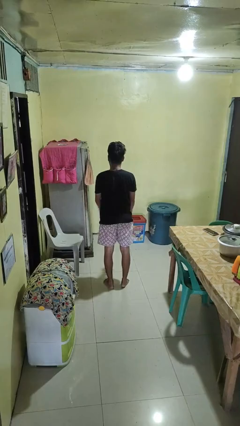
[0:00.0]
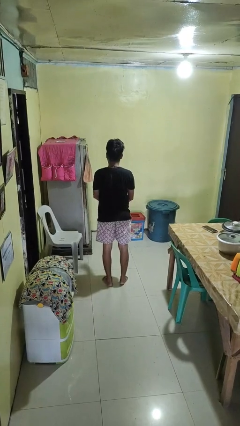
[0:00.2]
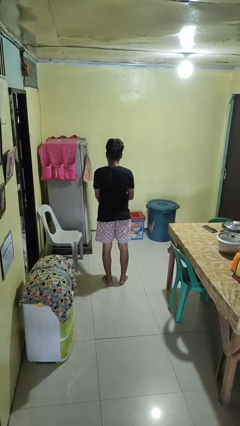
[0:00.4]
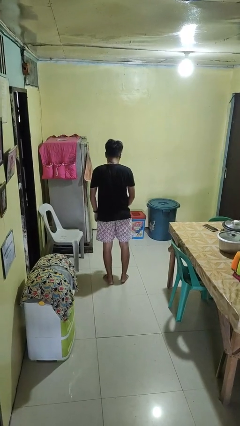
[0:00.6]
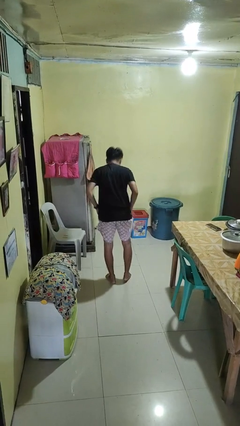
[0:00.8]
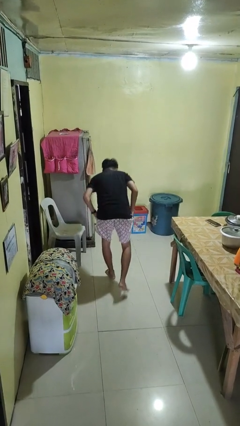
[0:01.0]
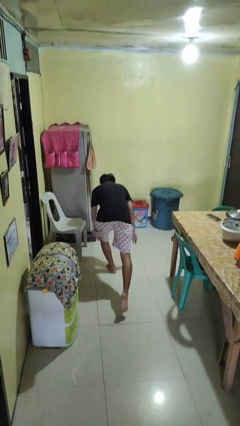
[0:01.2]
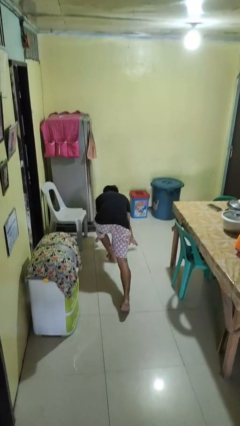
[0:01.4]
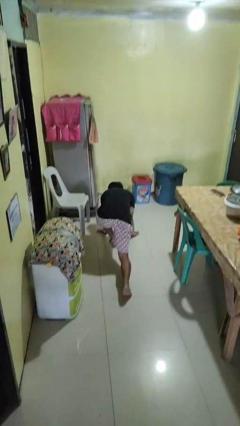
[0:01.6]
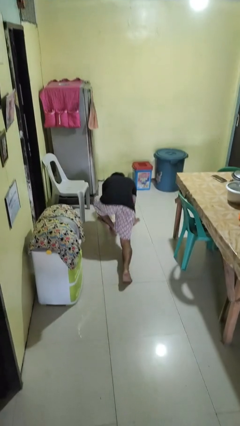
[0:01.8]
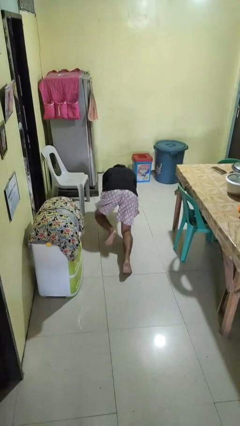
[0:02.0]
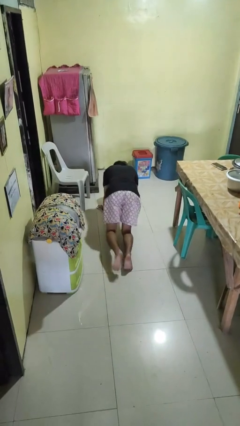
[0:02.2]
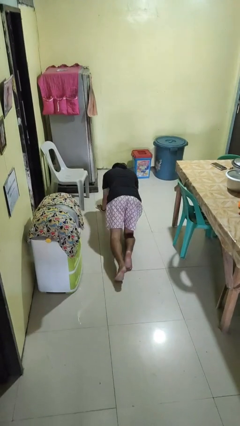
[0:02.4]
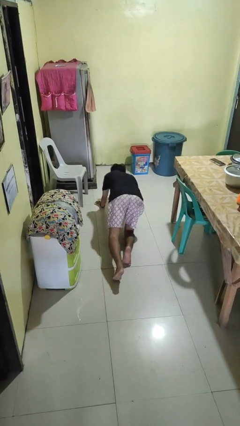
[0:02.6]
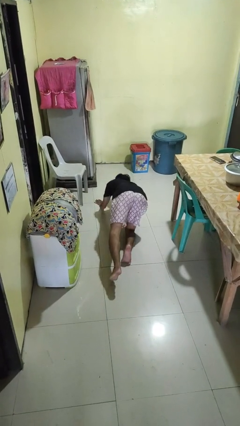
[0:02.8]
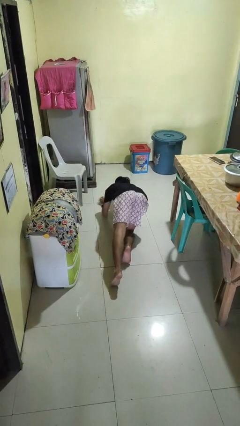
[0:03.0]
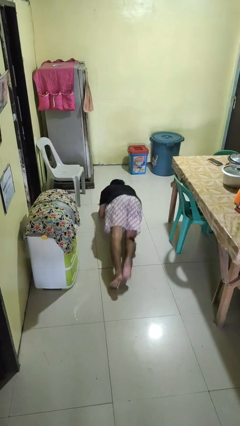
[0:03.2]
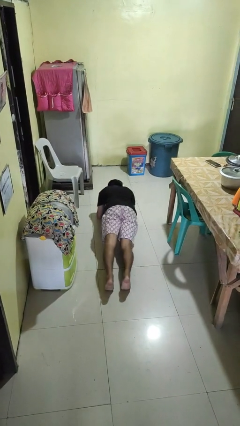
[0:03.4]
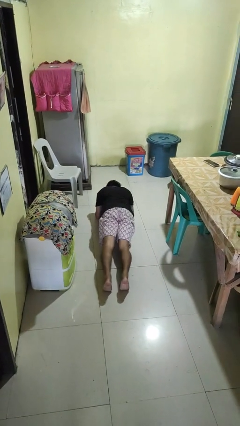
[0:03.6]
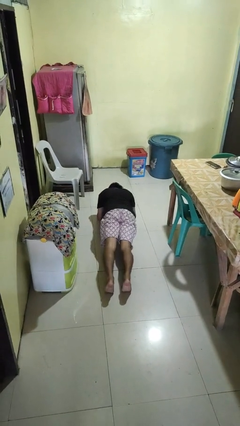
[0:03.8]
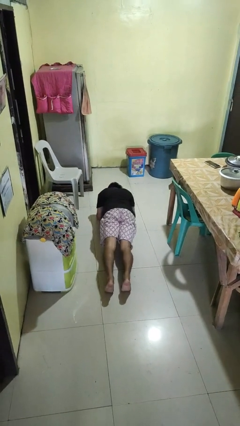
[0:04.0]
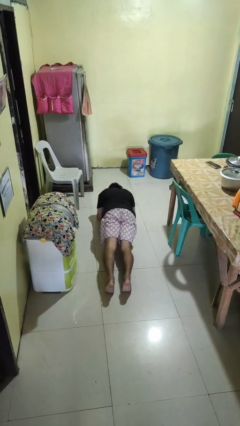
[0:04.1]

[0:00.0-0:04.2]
person exercises with plank

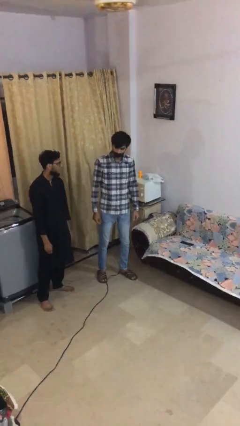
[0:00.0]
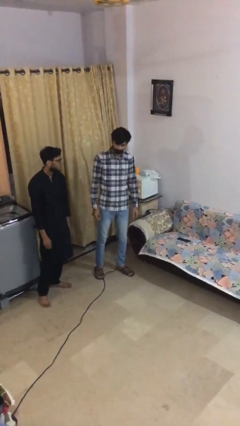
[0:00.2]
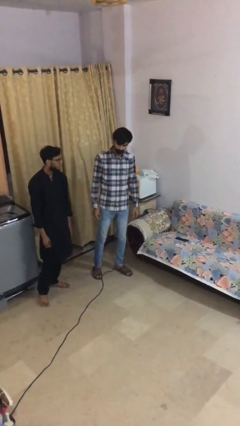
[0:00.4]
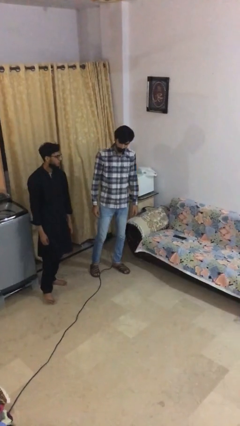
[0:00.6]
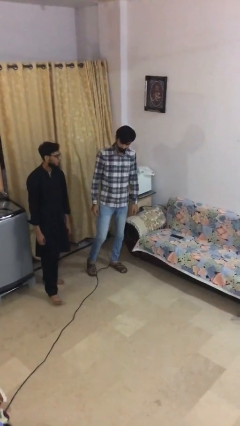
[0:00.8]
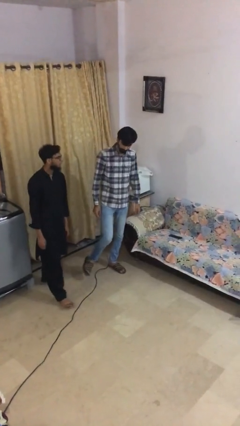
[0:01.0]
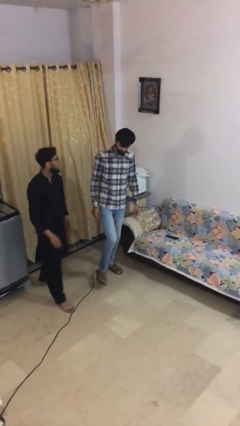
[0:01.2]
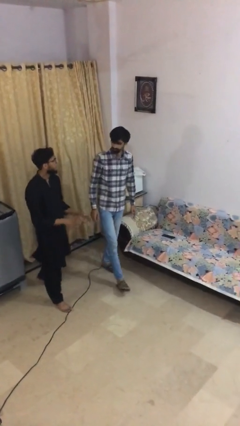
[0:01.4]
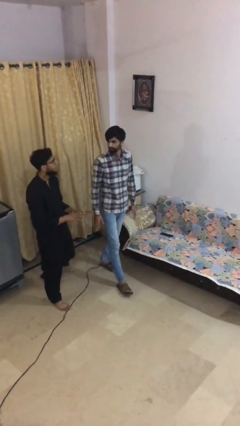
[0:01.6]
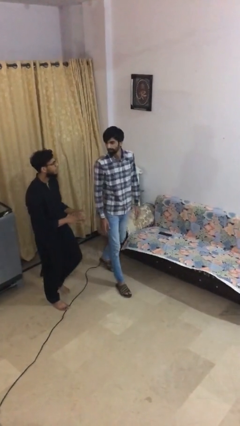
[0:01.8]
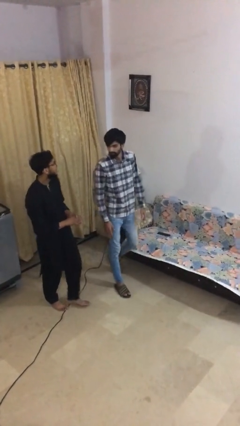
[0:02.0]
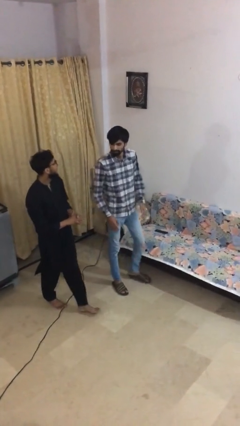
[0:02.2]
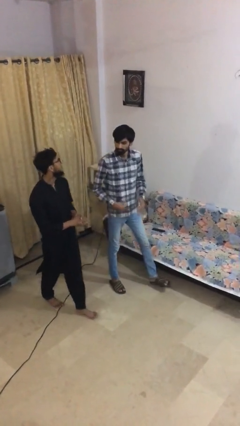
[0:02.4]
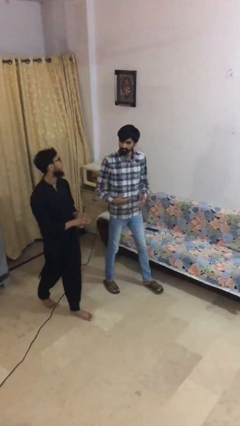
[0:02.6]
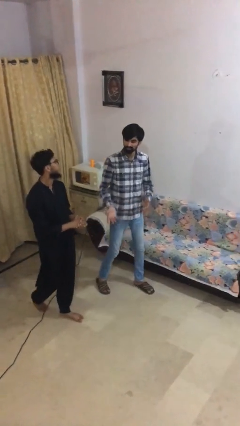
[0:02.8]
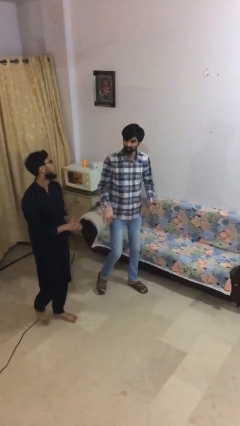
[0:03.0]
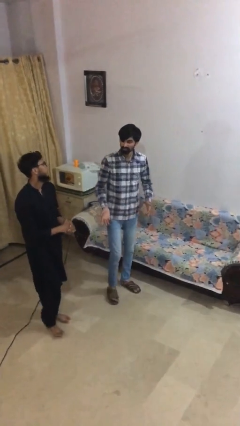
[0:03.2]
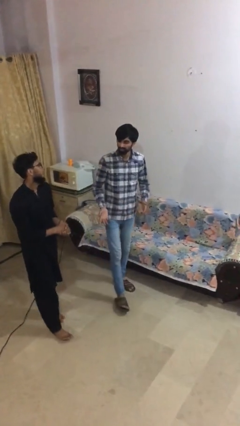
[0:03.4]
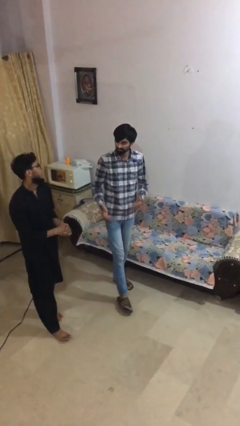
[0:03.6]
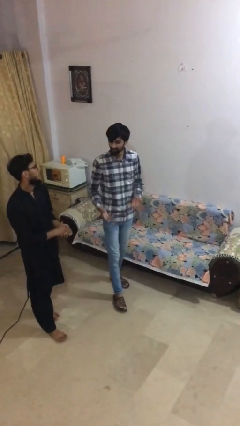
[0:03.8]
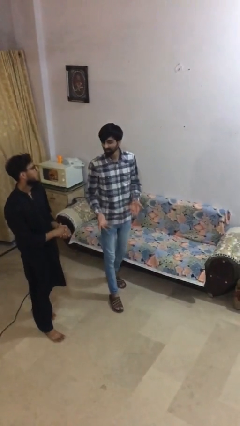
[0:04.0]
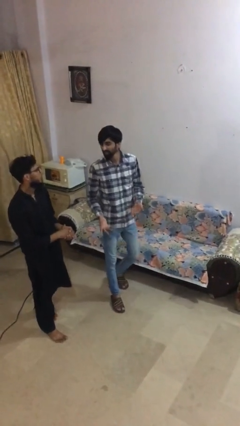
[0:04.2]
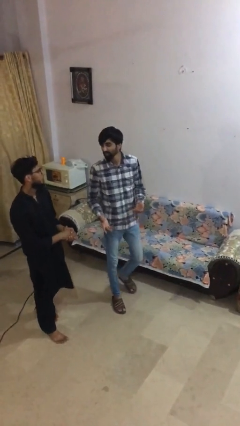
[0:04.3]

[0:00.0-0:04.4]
person talks to person

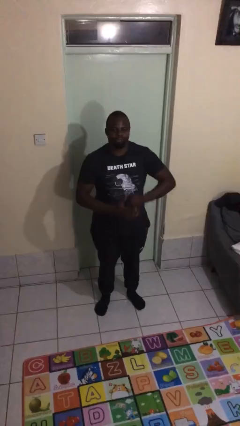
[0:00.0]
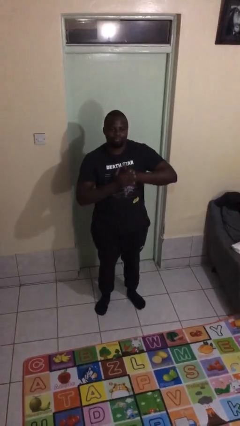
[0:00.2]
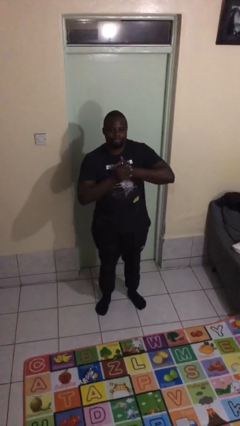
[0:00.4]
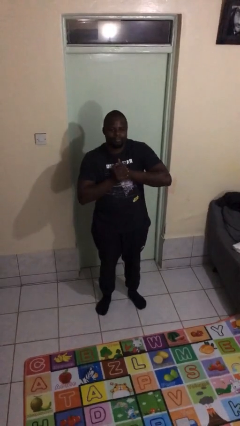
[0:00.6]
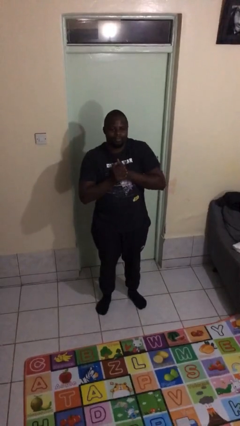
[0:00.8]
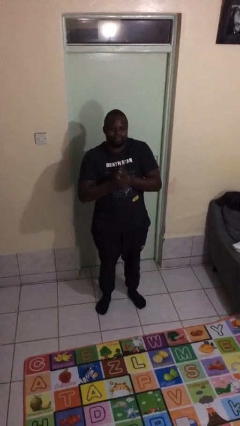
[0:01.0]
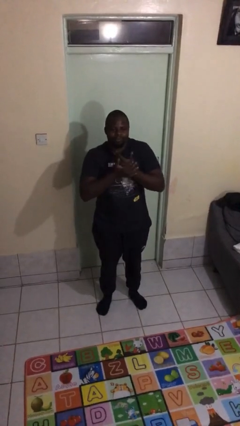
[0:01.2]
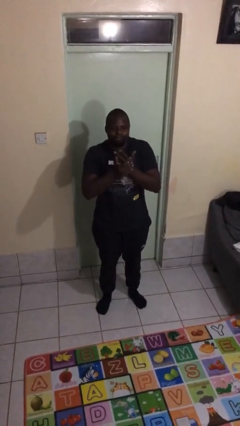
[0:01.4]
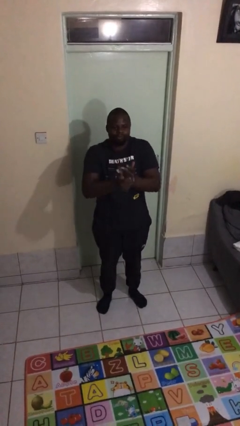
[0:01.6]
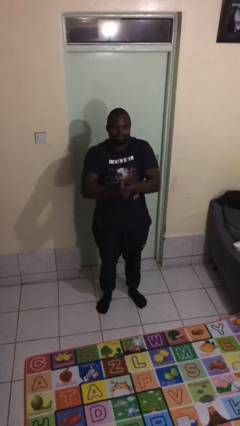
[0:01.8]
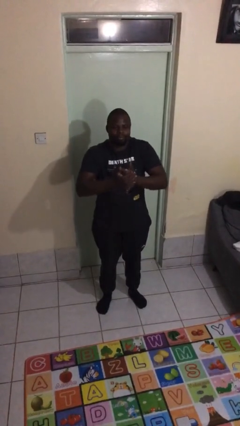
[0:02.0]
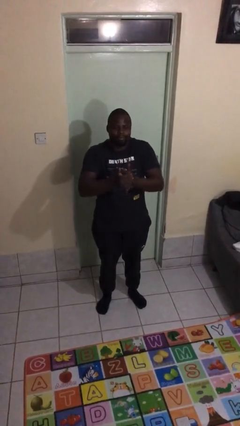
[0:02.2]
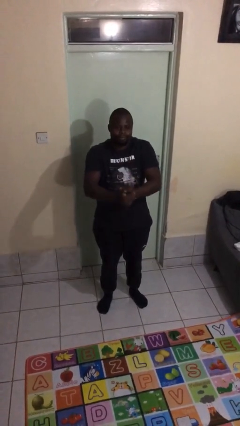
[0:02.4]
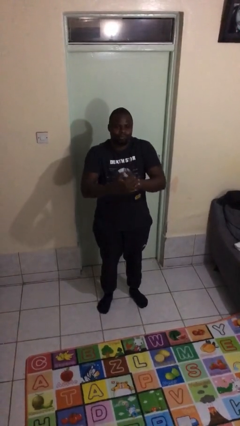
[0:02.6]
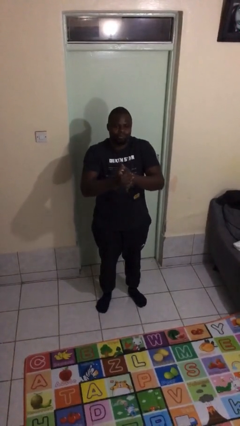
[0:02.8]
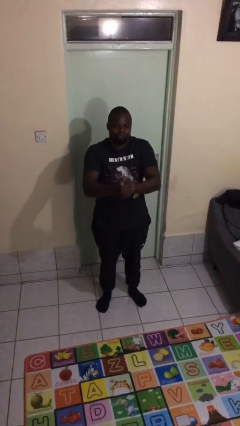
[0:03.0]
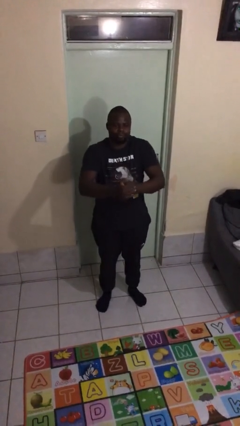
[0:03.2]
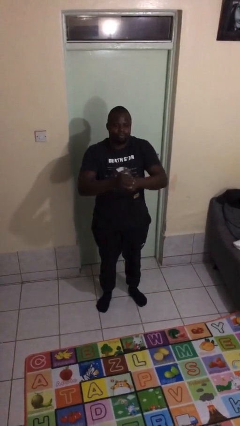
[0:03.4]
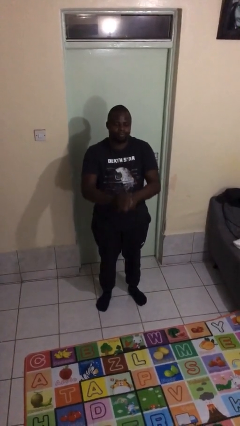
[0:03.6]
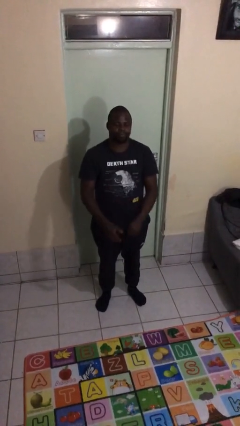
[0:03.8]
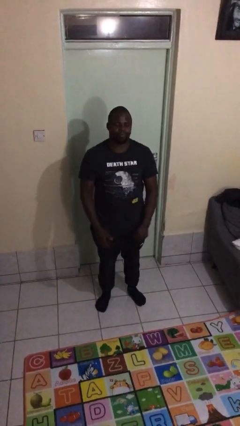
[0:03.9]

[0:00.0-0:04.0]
person cracks knuckles

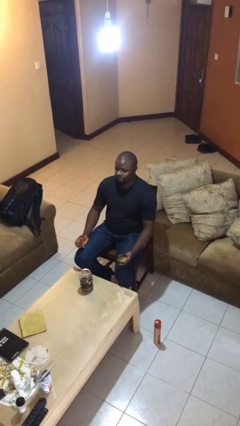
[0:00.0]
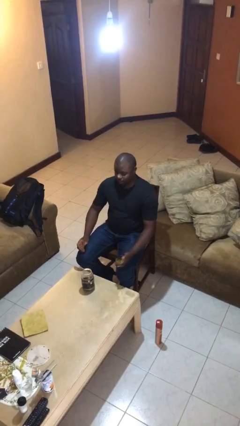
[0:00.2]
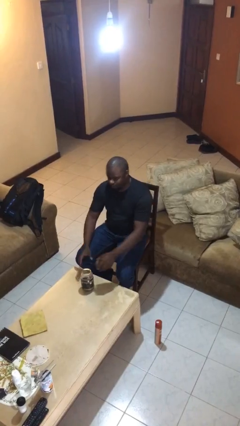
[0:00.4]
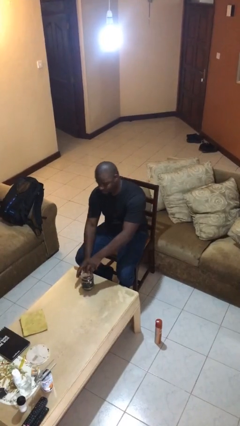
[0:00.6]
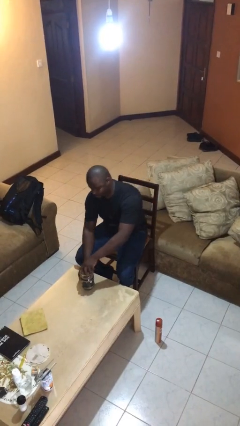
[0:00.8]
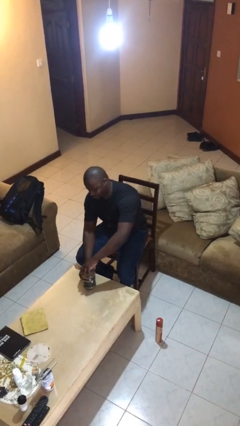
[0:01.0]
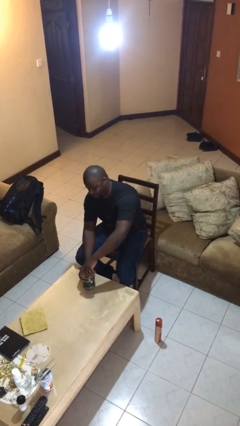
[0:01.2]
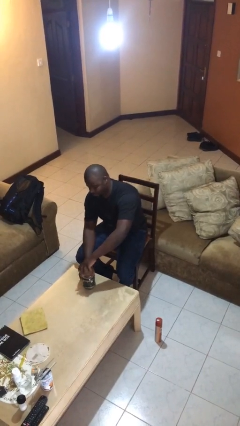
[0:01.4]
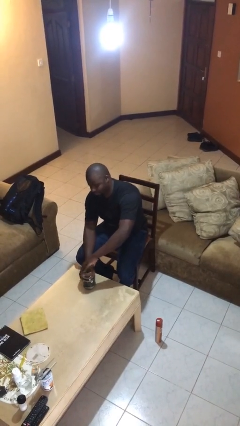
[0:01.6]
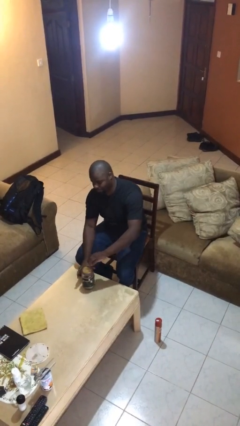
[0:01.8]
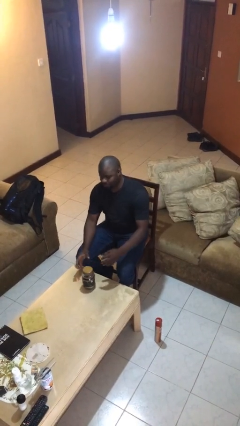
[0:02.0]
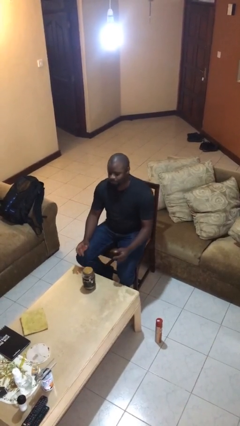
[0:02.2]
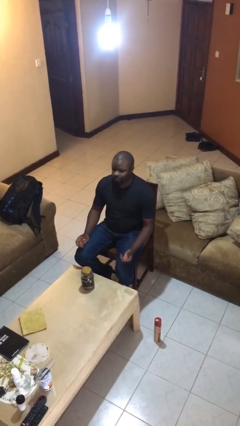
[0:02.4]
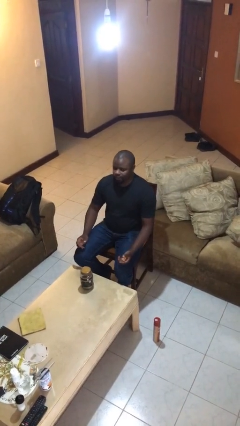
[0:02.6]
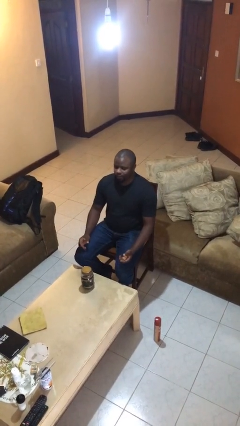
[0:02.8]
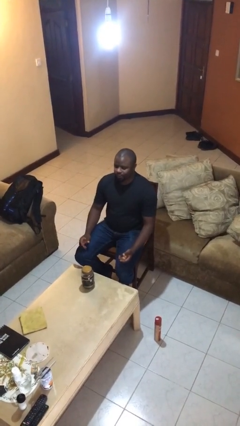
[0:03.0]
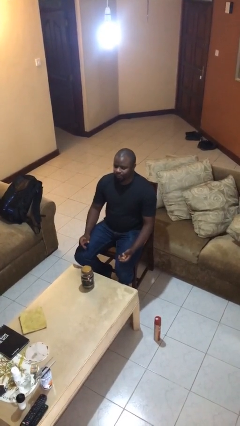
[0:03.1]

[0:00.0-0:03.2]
person closes jar

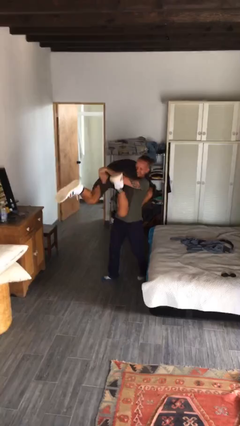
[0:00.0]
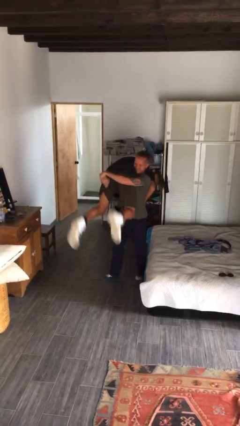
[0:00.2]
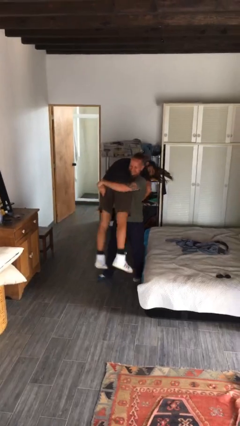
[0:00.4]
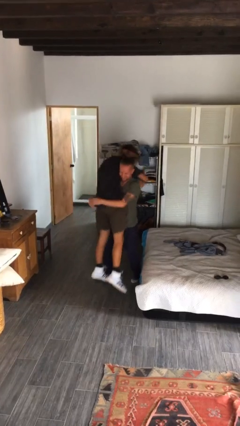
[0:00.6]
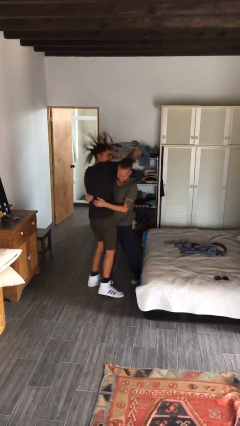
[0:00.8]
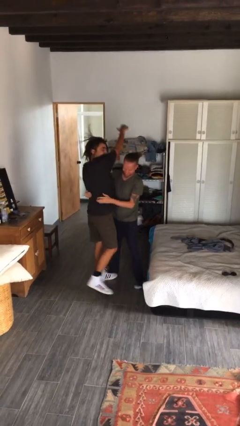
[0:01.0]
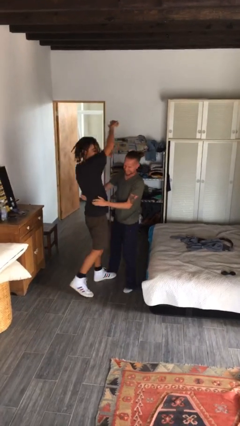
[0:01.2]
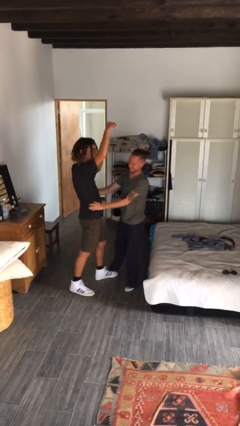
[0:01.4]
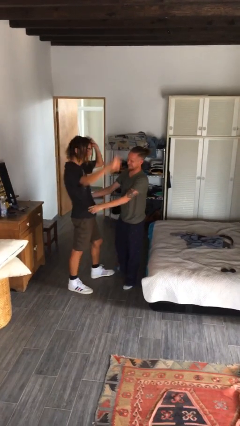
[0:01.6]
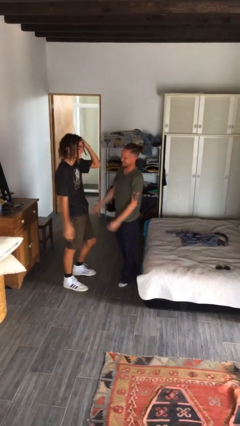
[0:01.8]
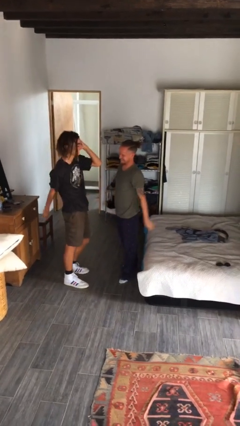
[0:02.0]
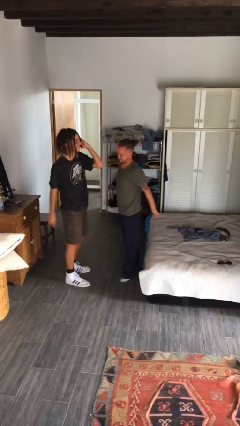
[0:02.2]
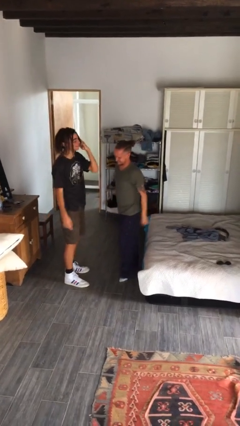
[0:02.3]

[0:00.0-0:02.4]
person puts down person
